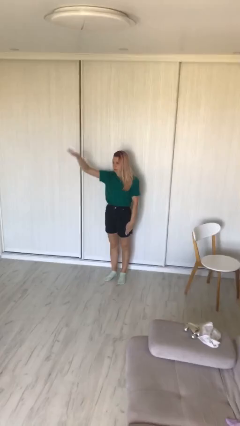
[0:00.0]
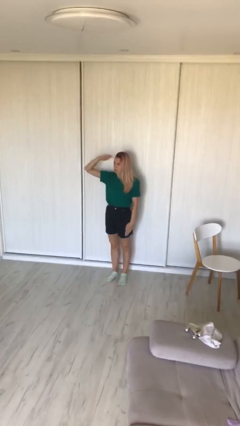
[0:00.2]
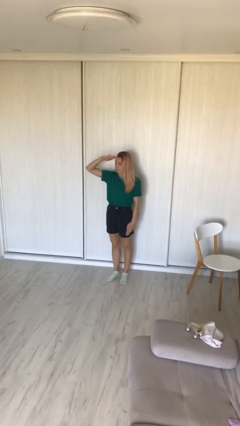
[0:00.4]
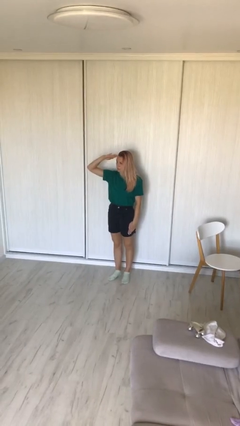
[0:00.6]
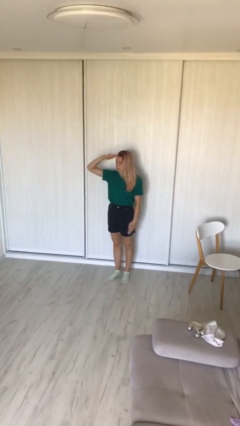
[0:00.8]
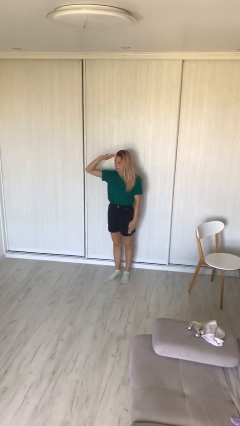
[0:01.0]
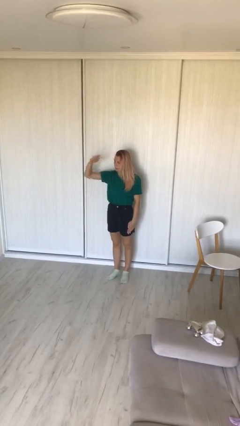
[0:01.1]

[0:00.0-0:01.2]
person salutes

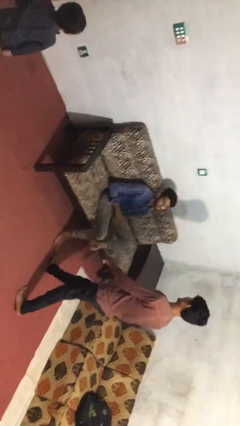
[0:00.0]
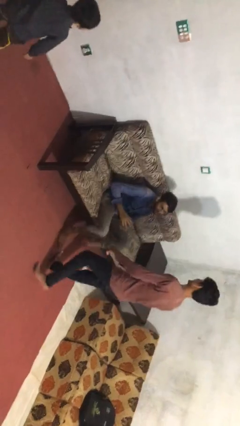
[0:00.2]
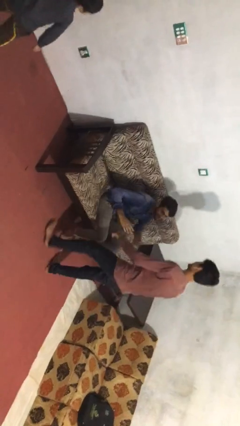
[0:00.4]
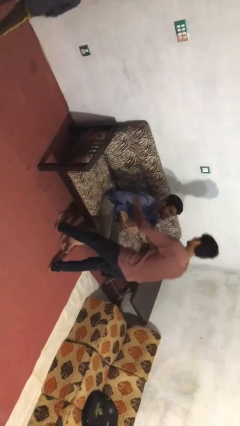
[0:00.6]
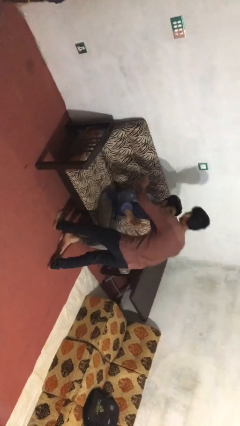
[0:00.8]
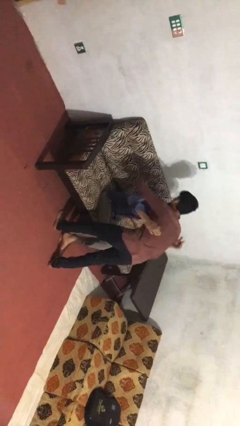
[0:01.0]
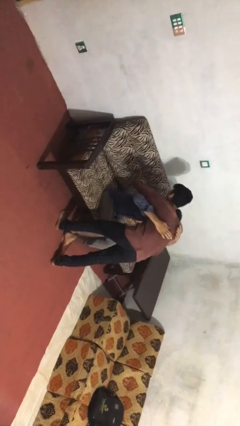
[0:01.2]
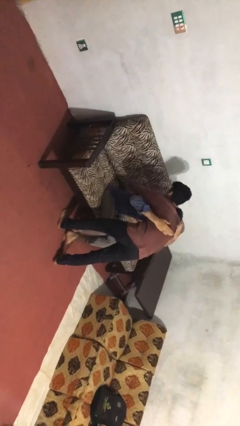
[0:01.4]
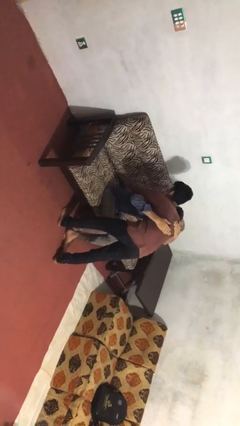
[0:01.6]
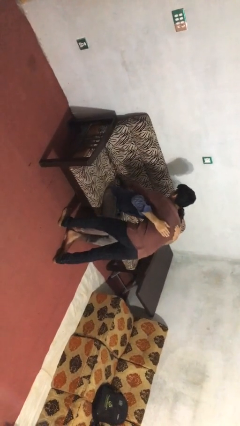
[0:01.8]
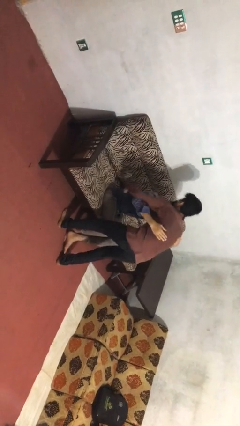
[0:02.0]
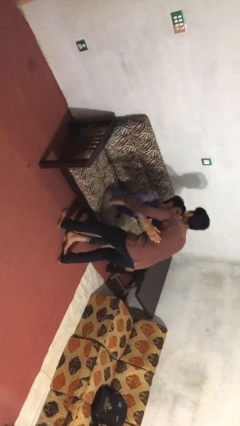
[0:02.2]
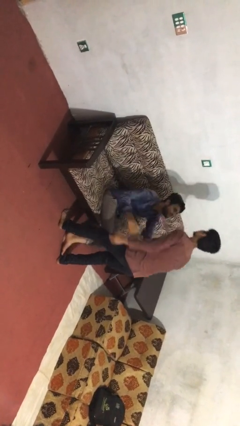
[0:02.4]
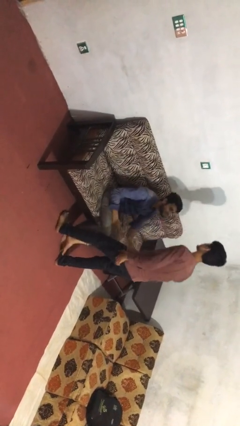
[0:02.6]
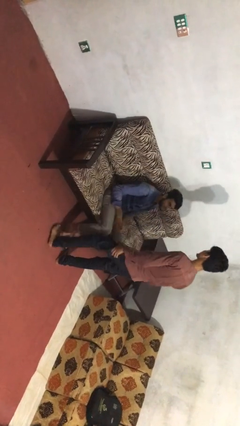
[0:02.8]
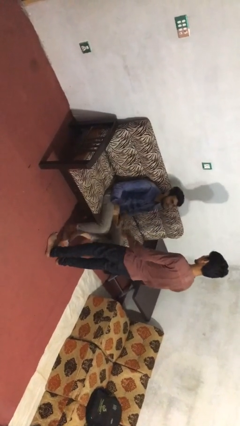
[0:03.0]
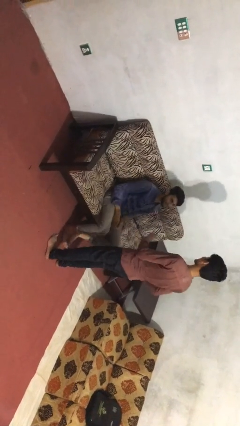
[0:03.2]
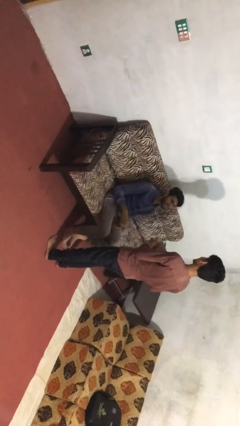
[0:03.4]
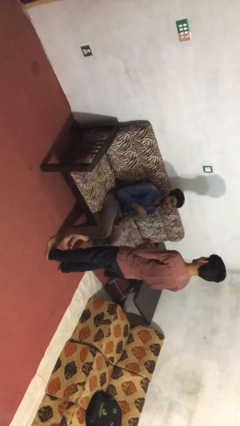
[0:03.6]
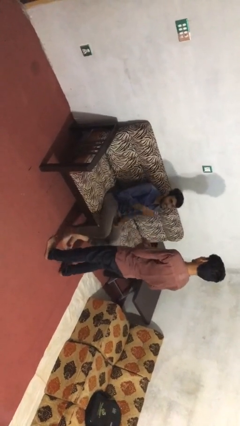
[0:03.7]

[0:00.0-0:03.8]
person embraces person

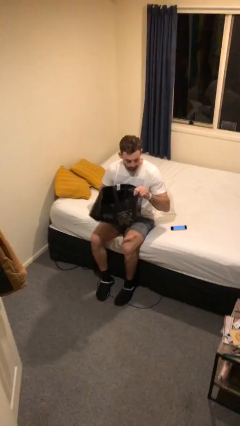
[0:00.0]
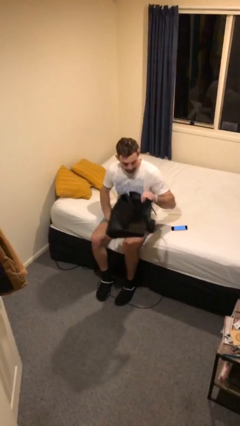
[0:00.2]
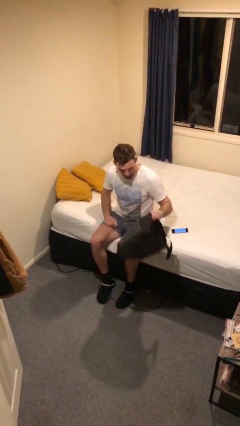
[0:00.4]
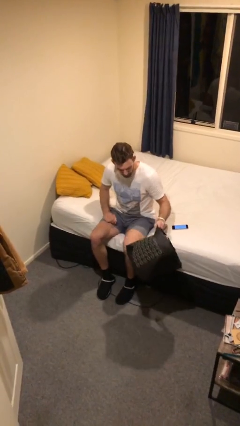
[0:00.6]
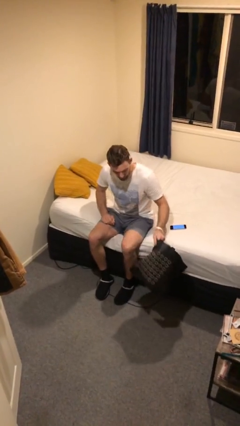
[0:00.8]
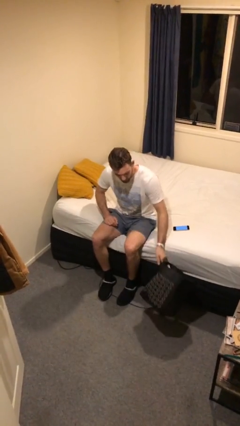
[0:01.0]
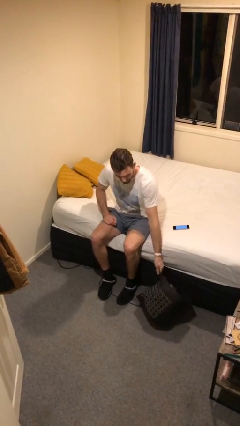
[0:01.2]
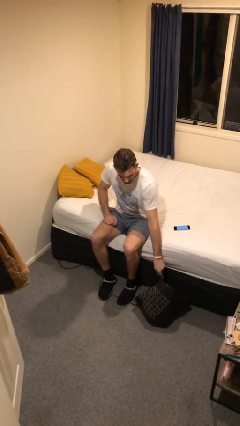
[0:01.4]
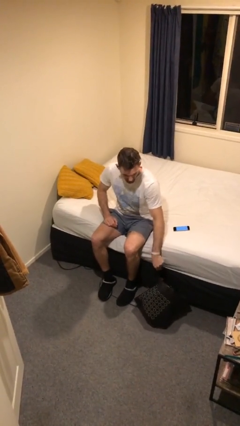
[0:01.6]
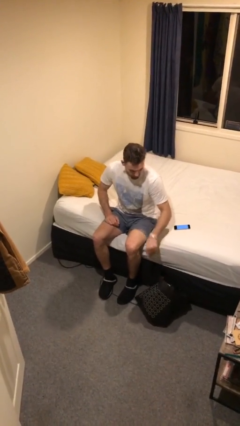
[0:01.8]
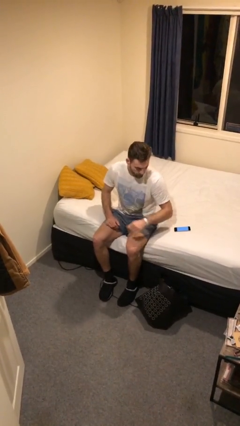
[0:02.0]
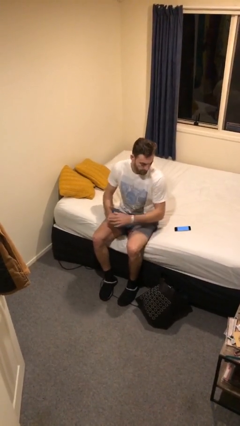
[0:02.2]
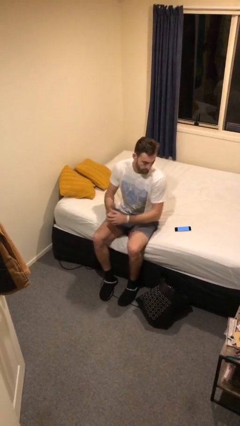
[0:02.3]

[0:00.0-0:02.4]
person puts down object on floor

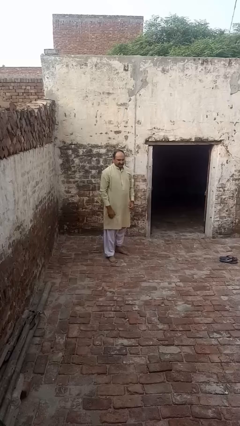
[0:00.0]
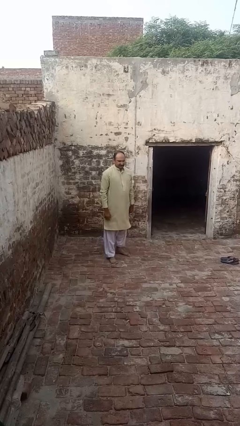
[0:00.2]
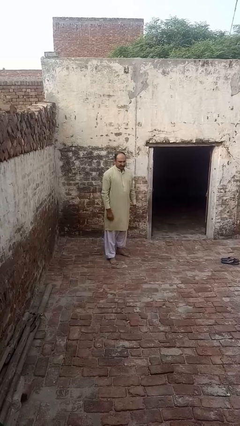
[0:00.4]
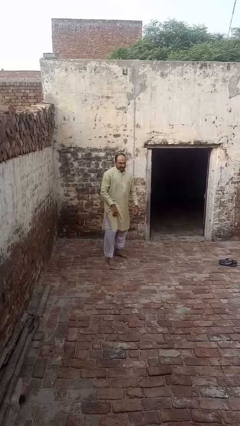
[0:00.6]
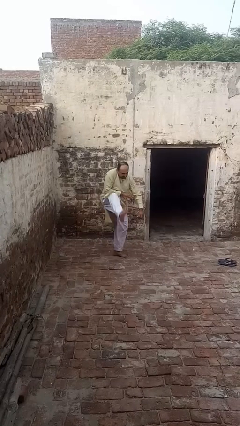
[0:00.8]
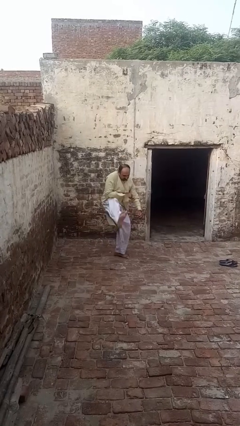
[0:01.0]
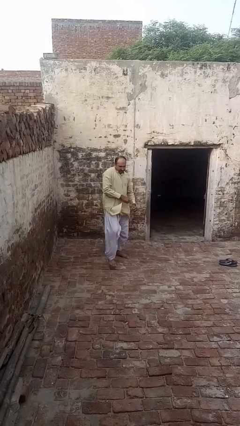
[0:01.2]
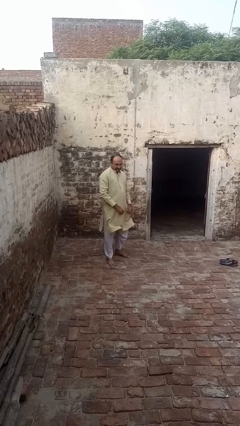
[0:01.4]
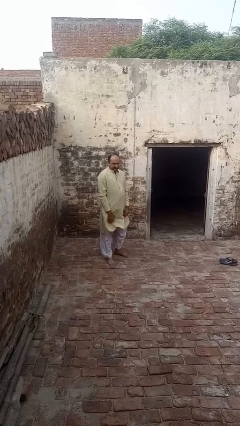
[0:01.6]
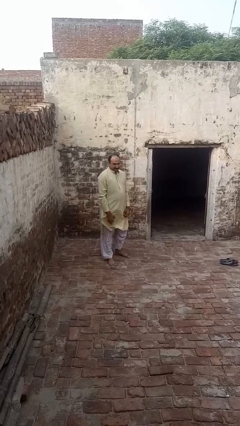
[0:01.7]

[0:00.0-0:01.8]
person karate kicks

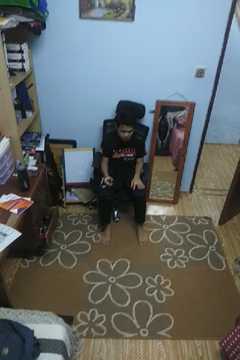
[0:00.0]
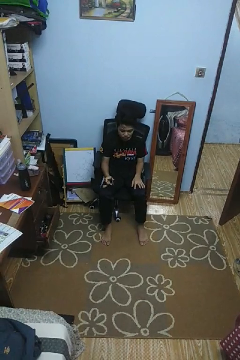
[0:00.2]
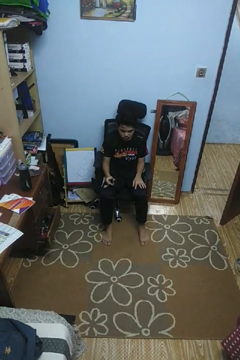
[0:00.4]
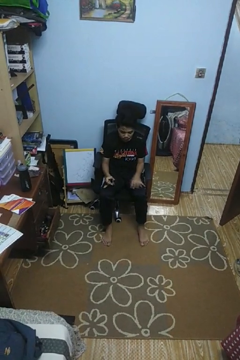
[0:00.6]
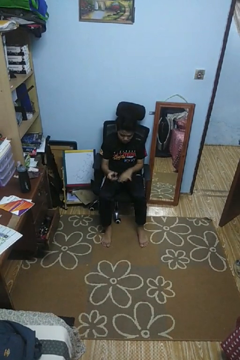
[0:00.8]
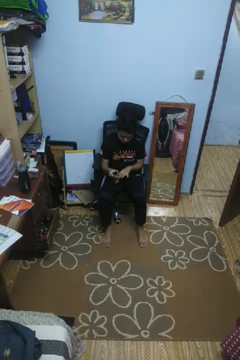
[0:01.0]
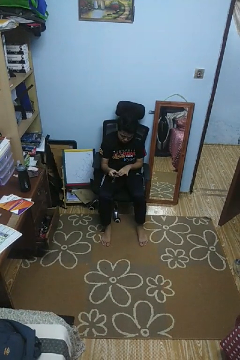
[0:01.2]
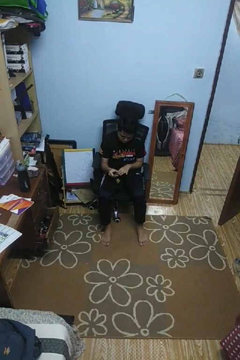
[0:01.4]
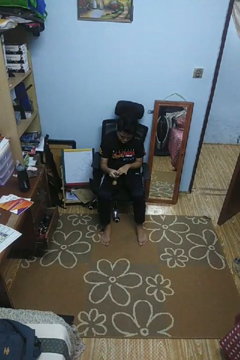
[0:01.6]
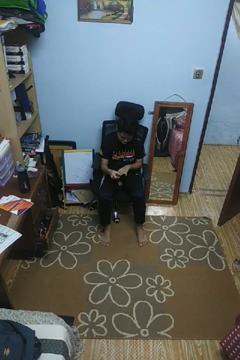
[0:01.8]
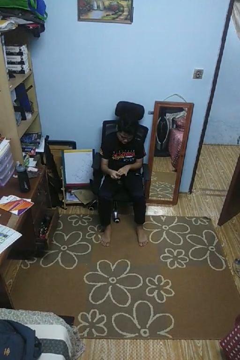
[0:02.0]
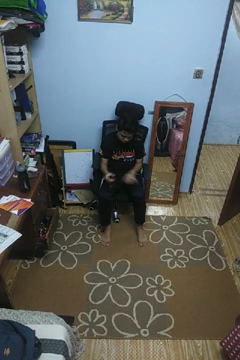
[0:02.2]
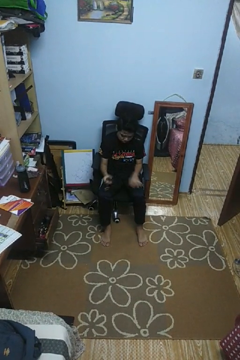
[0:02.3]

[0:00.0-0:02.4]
person clips fingernails

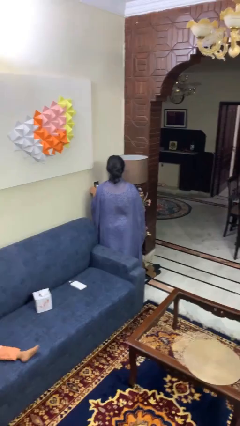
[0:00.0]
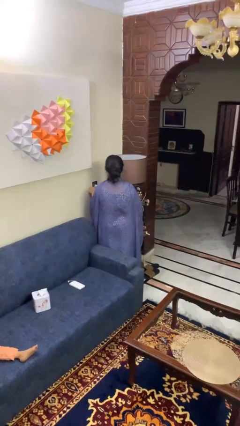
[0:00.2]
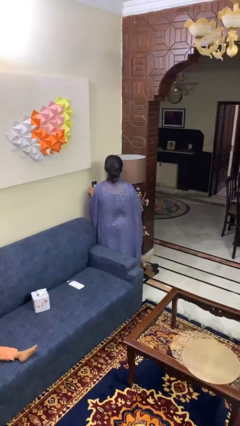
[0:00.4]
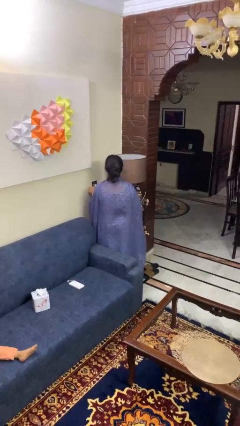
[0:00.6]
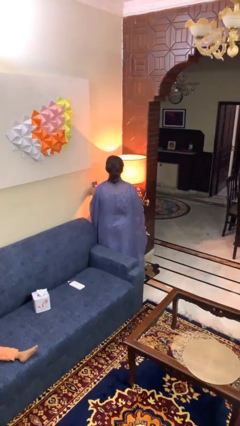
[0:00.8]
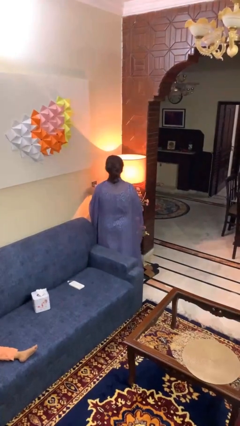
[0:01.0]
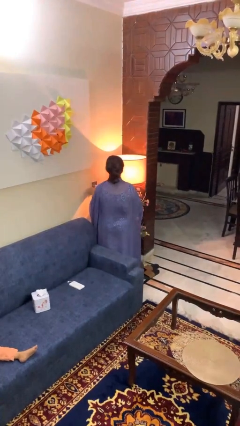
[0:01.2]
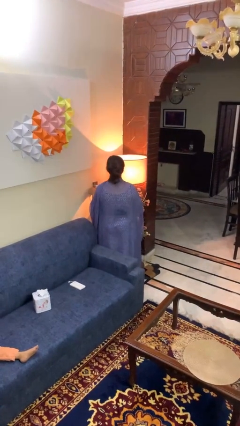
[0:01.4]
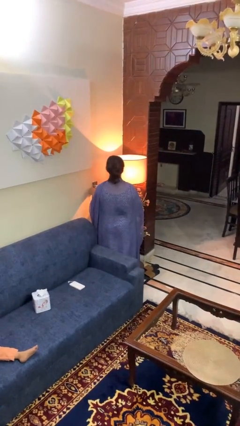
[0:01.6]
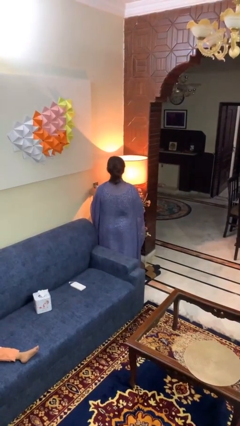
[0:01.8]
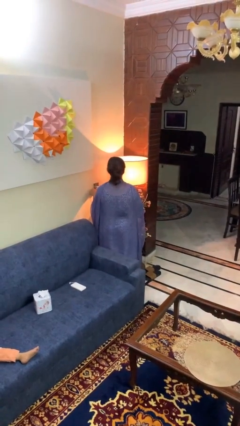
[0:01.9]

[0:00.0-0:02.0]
person turns on lamp

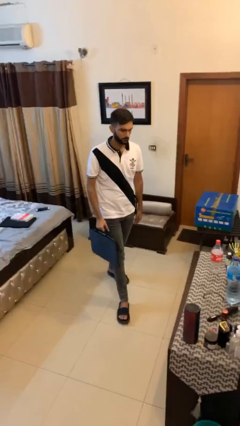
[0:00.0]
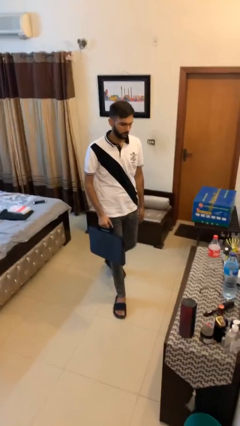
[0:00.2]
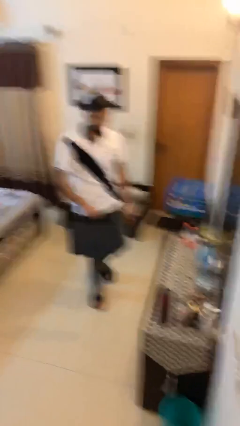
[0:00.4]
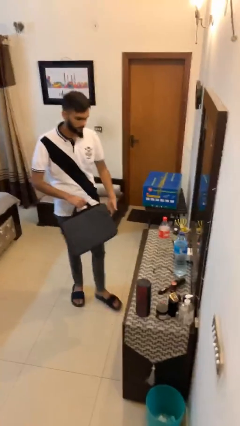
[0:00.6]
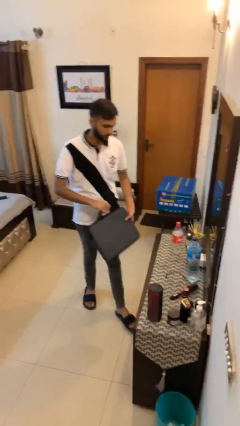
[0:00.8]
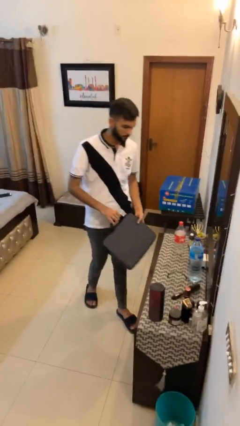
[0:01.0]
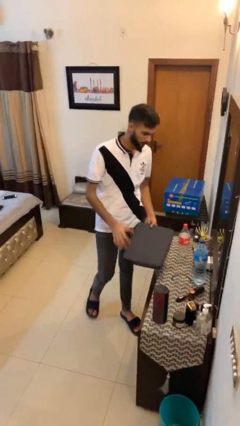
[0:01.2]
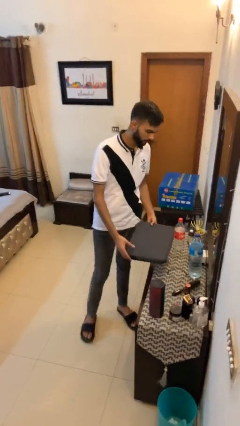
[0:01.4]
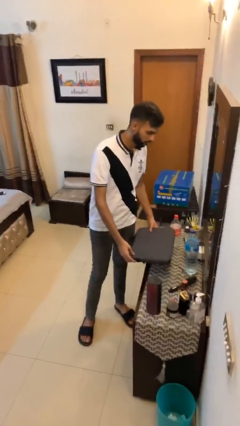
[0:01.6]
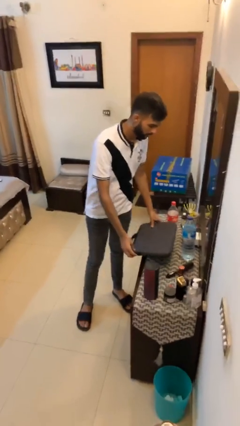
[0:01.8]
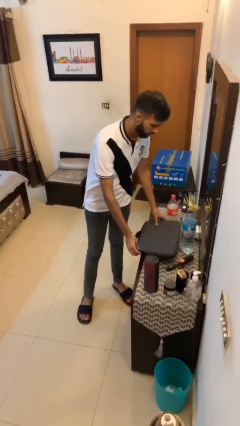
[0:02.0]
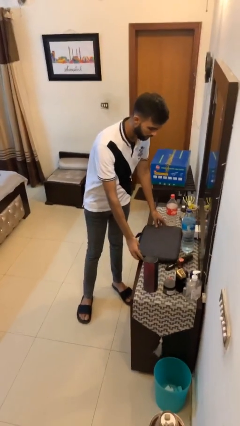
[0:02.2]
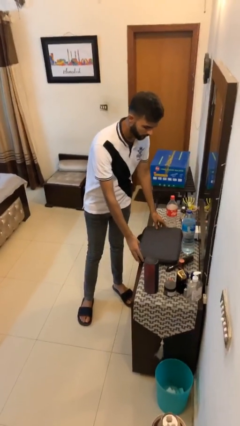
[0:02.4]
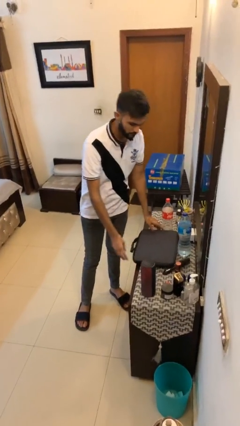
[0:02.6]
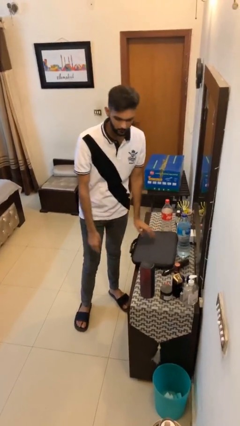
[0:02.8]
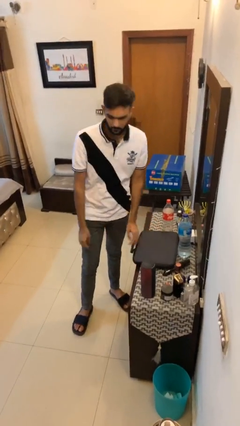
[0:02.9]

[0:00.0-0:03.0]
person puts down object on table

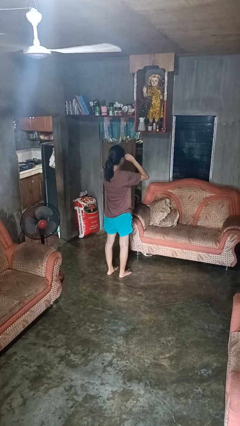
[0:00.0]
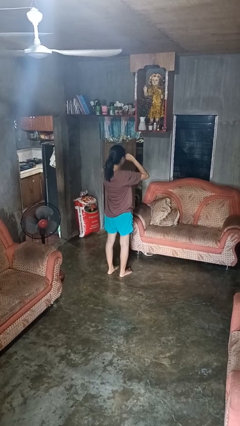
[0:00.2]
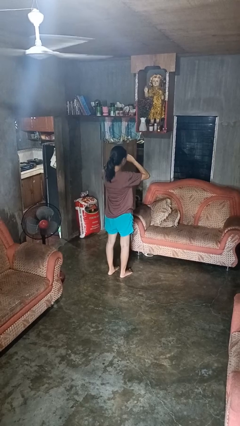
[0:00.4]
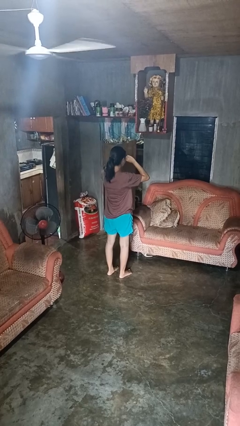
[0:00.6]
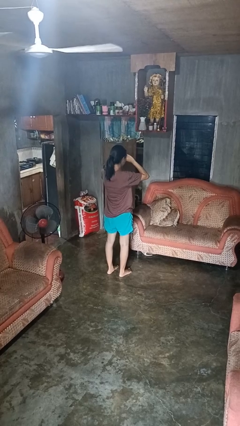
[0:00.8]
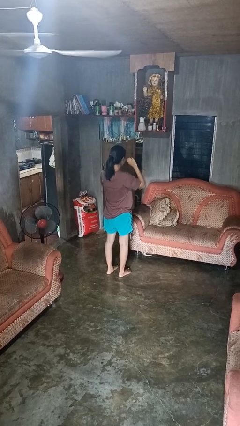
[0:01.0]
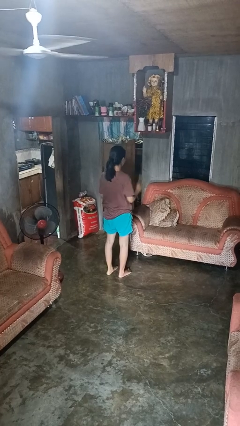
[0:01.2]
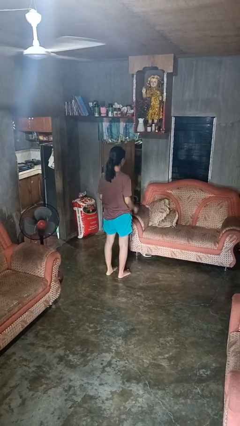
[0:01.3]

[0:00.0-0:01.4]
person rubs eyes
